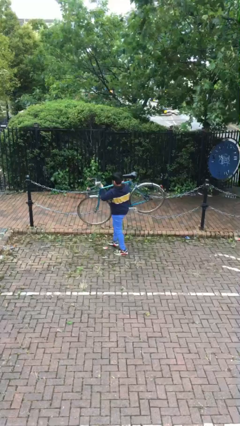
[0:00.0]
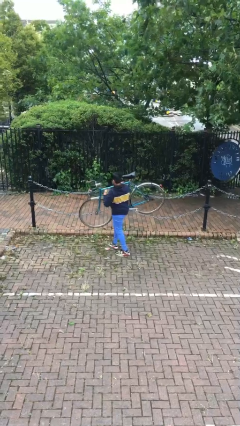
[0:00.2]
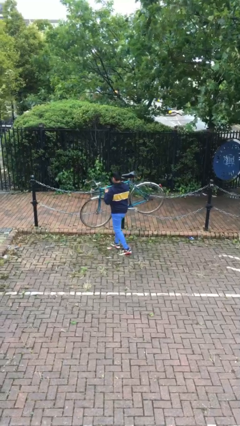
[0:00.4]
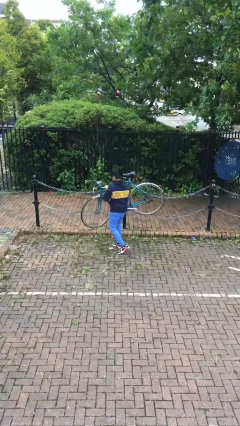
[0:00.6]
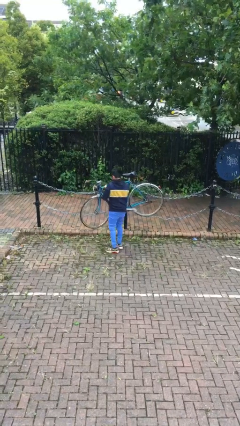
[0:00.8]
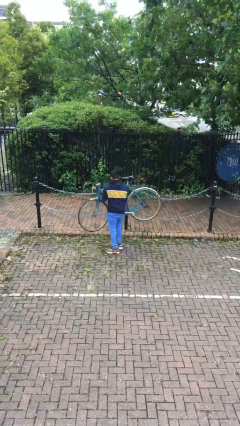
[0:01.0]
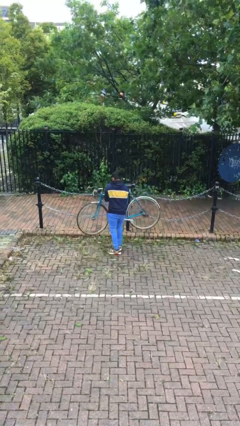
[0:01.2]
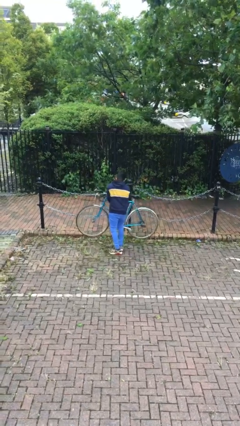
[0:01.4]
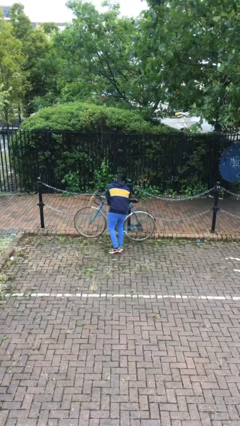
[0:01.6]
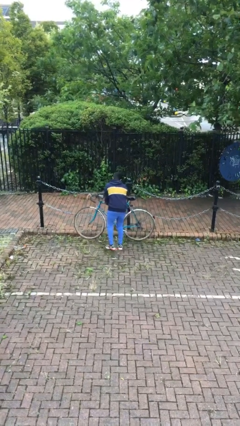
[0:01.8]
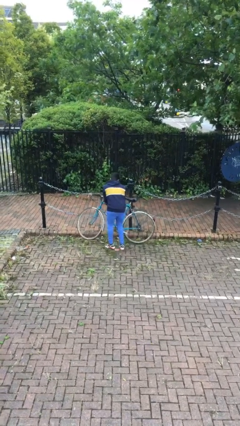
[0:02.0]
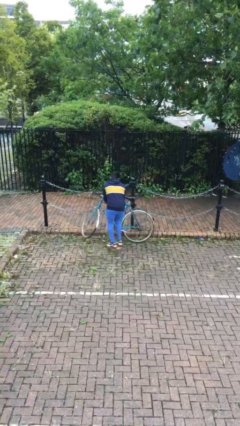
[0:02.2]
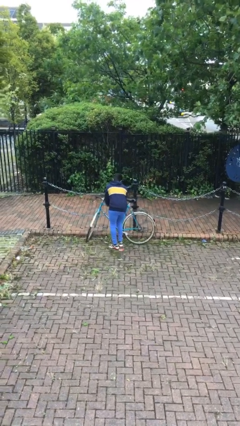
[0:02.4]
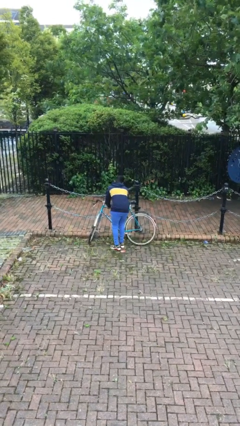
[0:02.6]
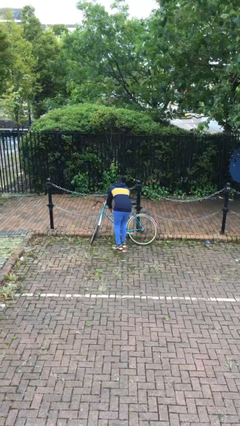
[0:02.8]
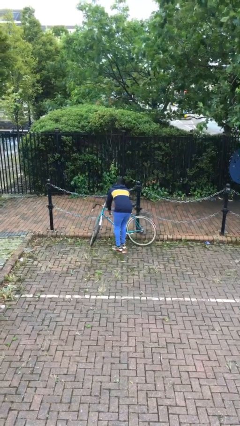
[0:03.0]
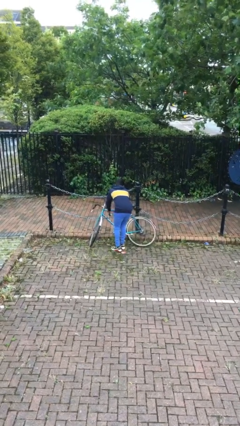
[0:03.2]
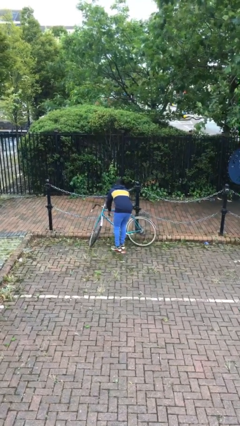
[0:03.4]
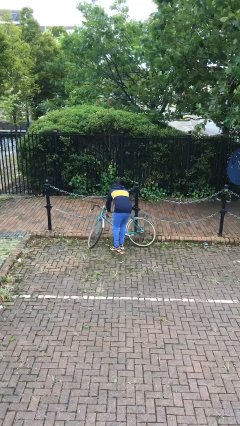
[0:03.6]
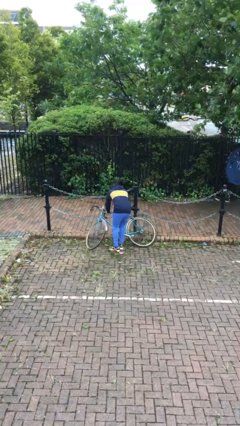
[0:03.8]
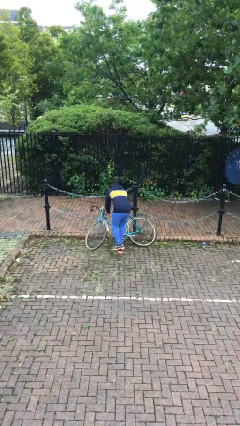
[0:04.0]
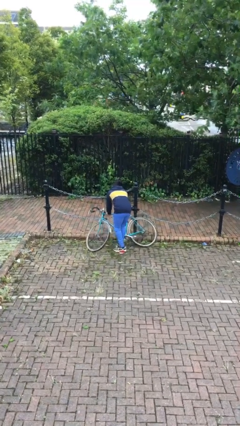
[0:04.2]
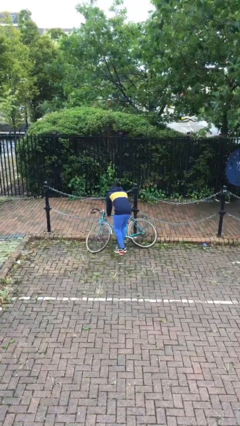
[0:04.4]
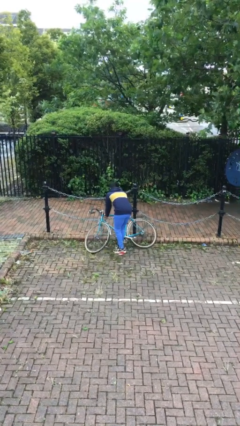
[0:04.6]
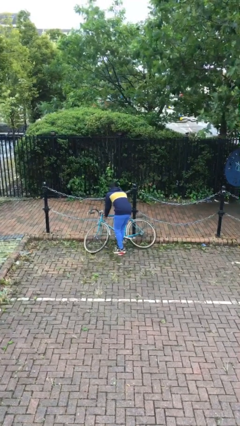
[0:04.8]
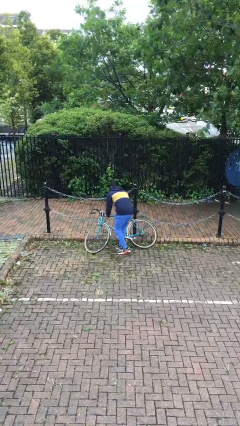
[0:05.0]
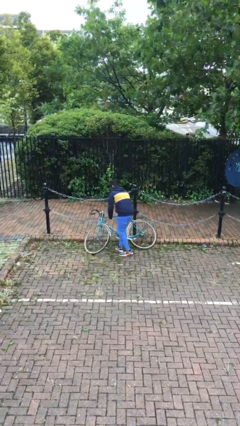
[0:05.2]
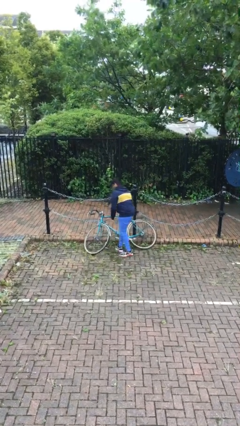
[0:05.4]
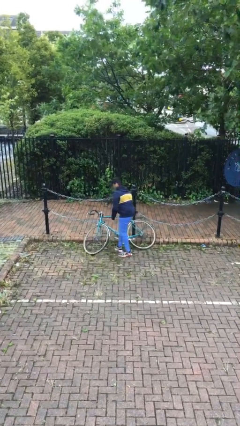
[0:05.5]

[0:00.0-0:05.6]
person puts down object on floor

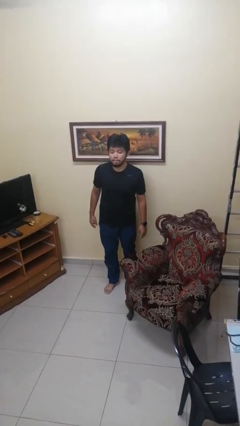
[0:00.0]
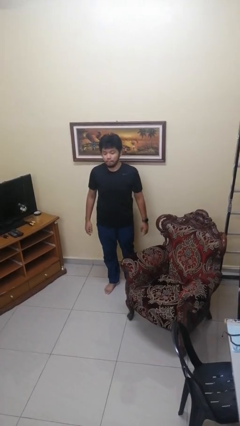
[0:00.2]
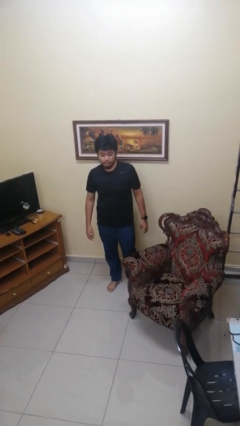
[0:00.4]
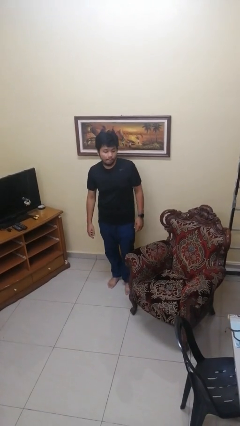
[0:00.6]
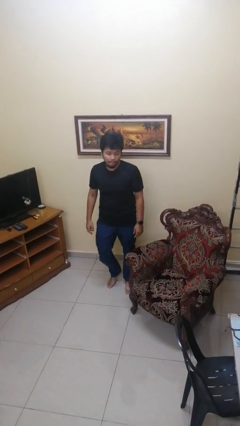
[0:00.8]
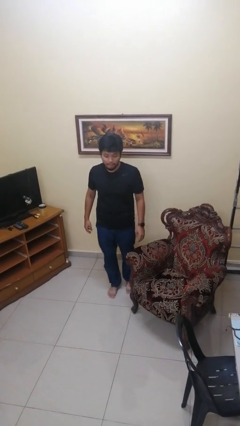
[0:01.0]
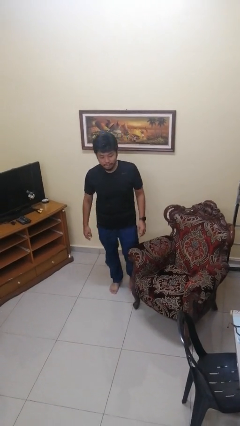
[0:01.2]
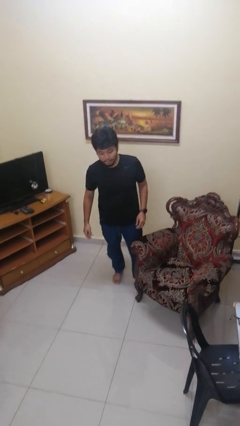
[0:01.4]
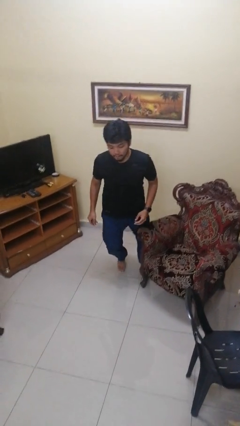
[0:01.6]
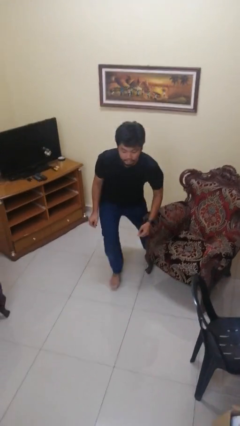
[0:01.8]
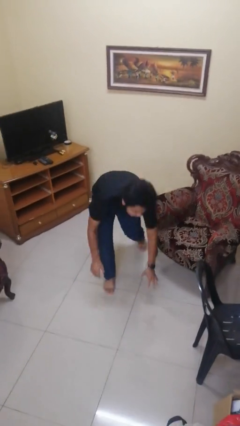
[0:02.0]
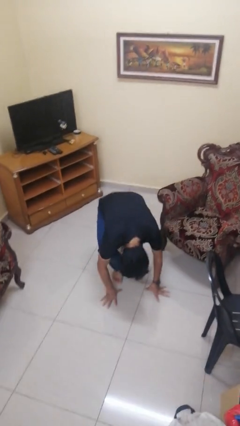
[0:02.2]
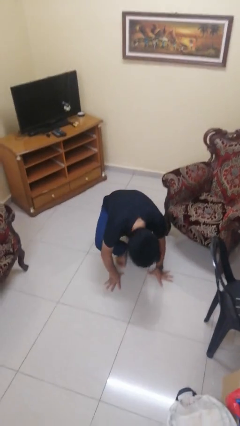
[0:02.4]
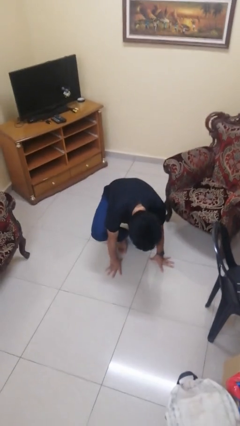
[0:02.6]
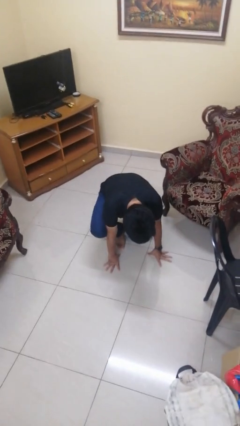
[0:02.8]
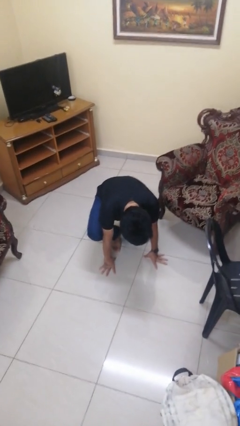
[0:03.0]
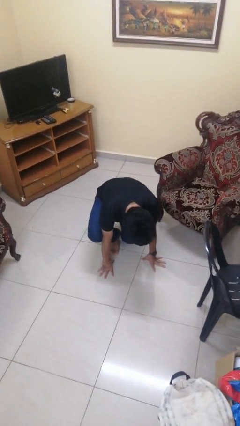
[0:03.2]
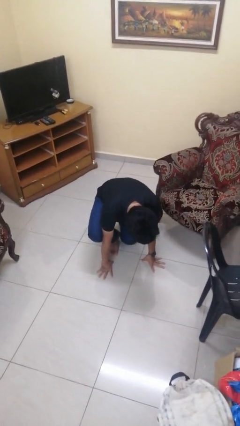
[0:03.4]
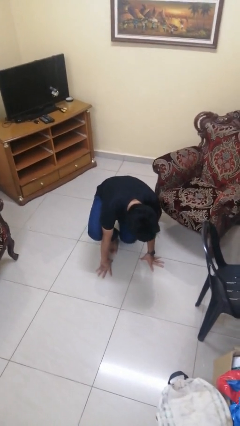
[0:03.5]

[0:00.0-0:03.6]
person trips on object on floor

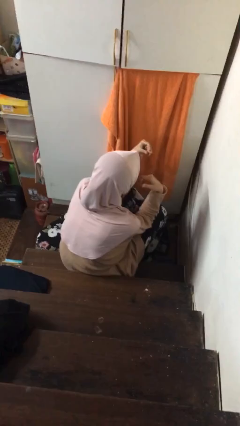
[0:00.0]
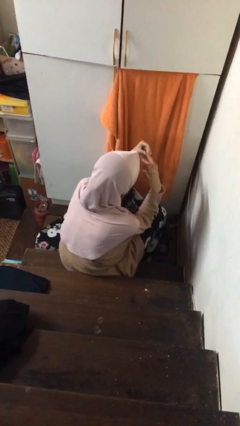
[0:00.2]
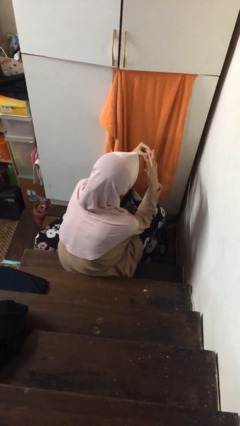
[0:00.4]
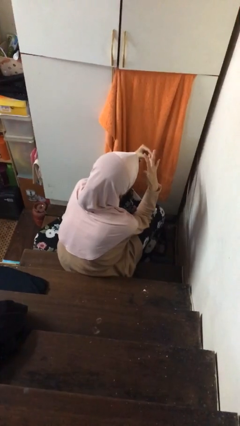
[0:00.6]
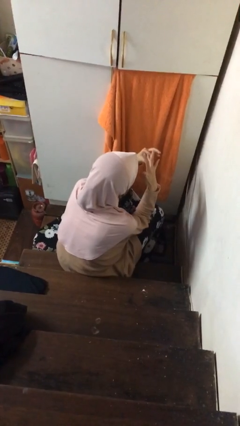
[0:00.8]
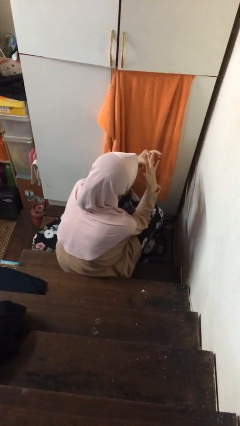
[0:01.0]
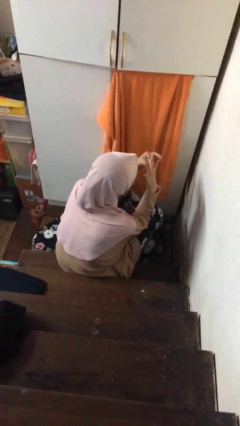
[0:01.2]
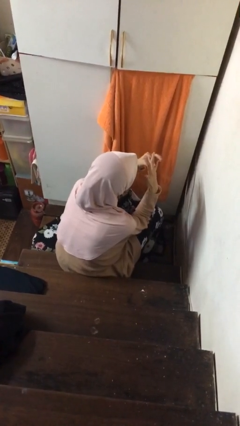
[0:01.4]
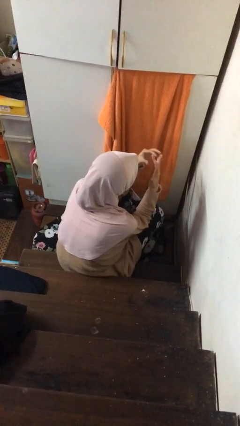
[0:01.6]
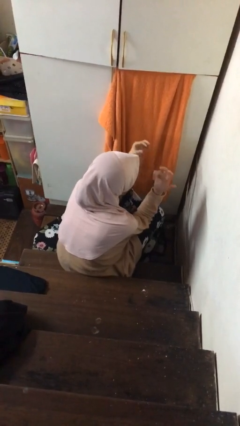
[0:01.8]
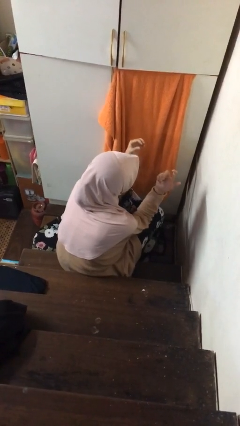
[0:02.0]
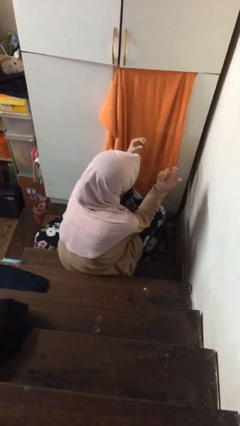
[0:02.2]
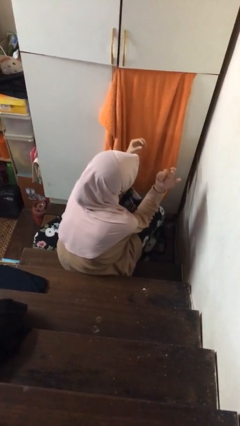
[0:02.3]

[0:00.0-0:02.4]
person puts on ring

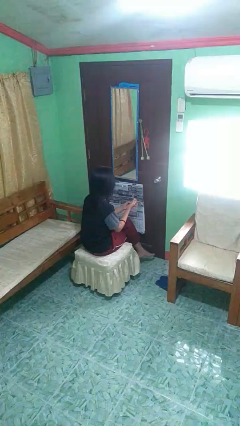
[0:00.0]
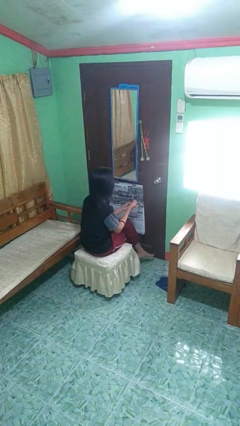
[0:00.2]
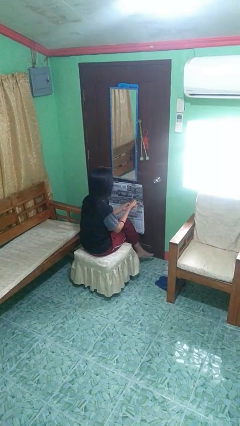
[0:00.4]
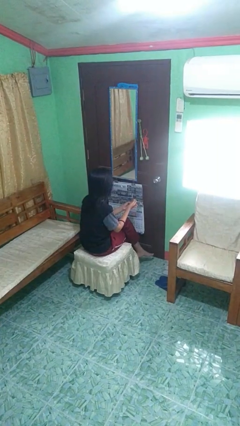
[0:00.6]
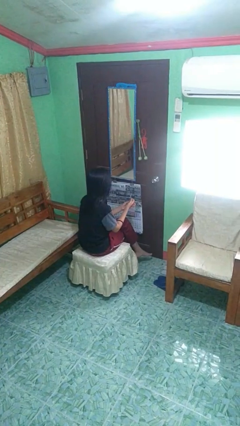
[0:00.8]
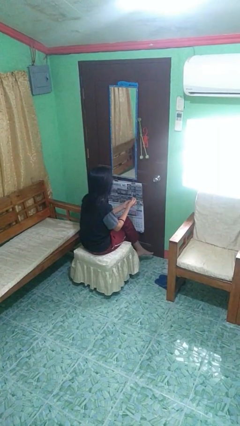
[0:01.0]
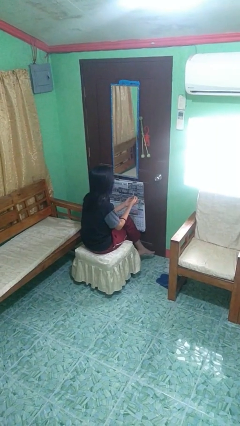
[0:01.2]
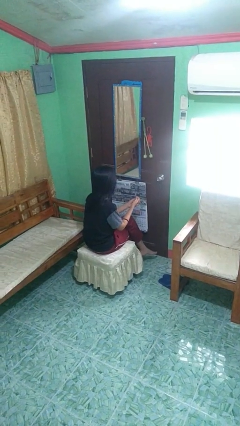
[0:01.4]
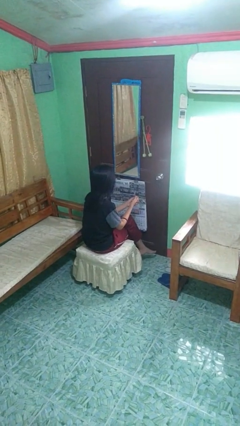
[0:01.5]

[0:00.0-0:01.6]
person cracks knuckles

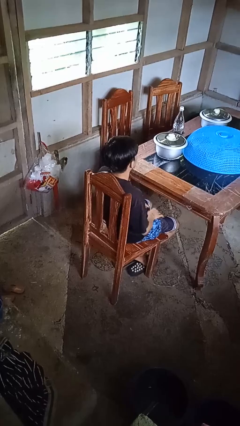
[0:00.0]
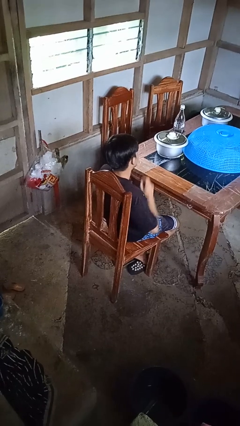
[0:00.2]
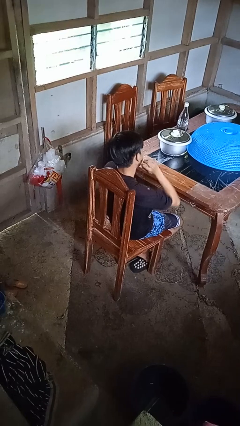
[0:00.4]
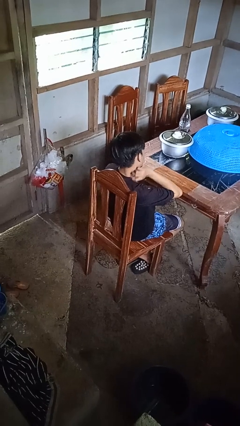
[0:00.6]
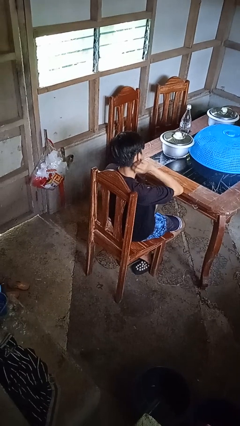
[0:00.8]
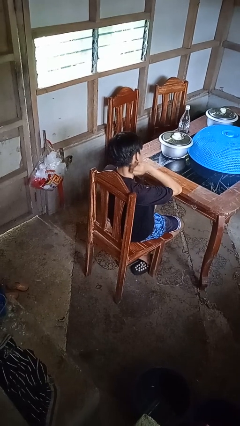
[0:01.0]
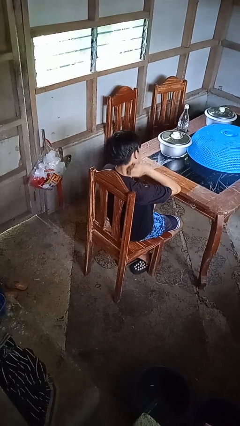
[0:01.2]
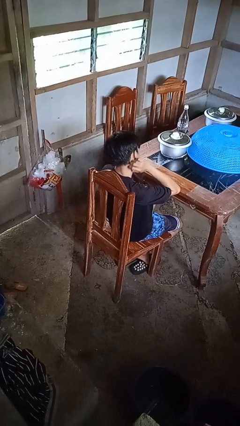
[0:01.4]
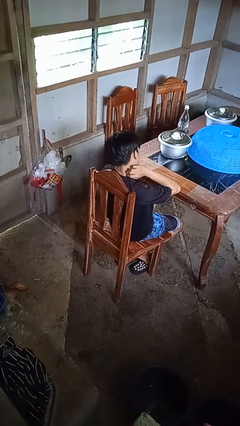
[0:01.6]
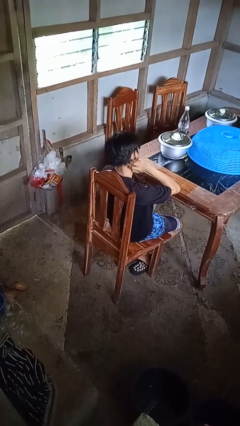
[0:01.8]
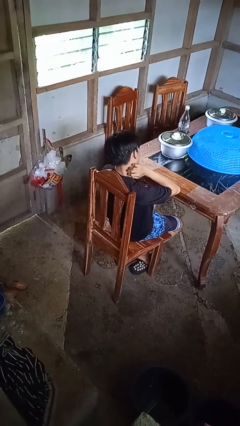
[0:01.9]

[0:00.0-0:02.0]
person rubs neck

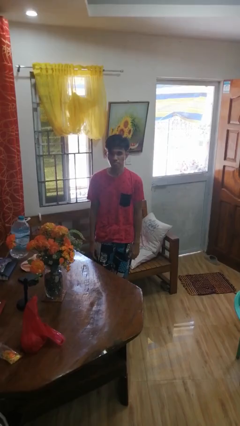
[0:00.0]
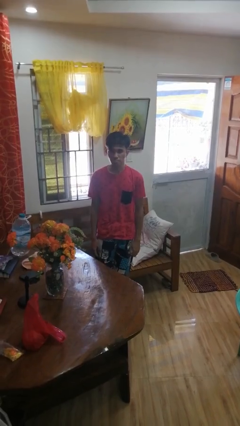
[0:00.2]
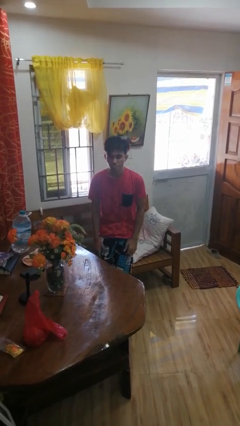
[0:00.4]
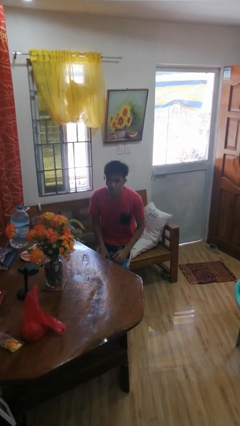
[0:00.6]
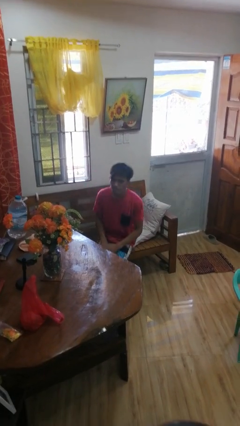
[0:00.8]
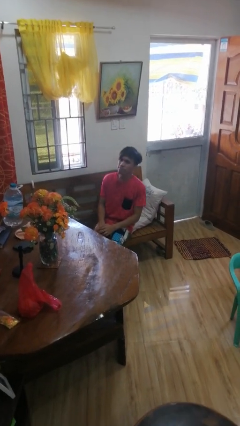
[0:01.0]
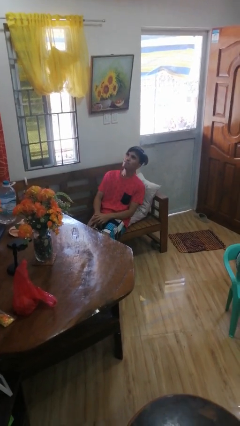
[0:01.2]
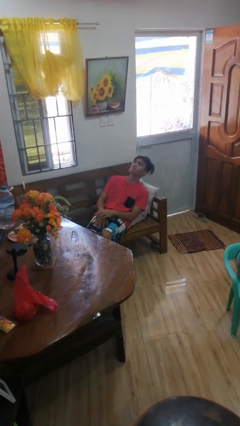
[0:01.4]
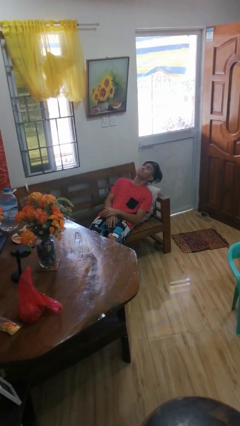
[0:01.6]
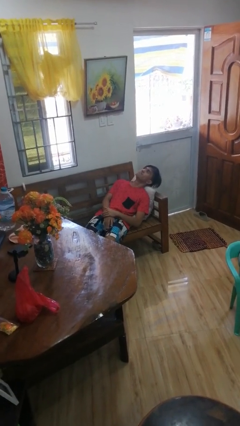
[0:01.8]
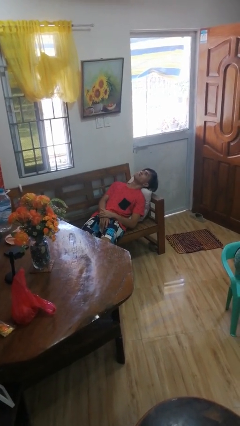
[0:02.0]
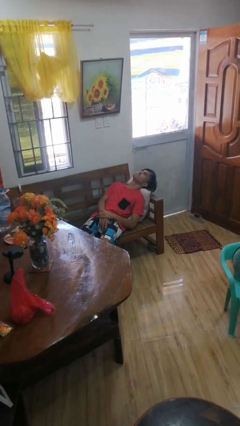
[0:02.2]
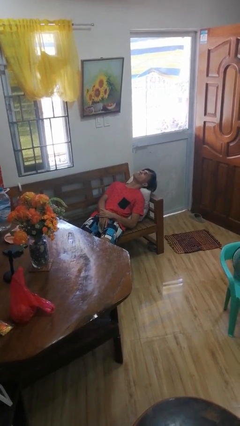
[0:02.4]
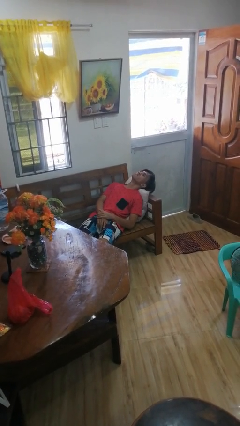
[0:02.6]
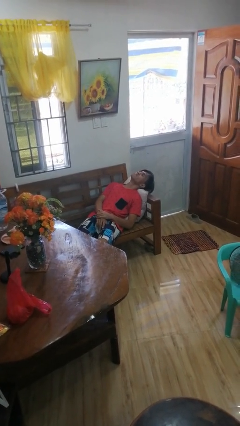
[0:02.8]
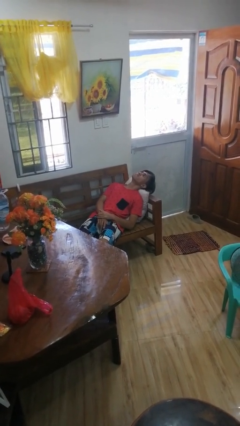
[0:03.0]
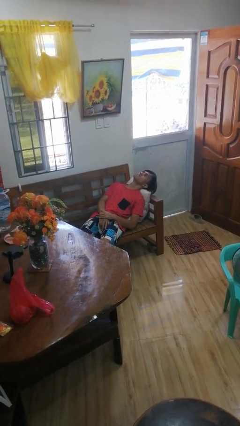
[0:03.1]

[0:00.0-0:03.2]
person lies down on couch
